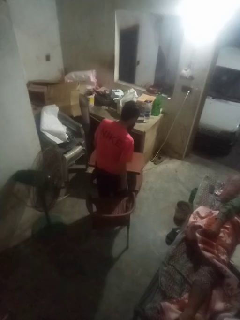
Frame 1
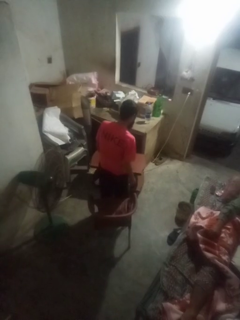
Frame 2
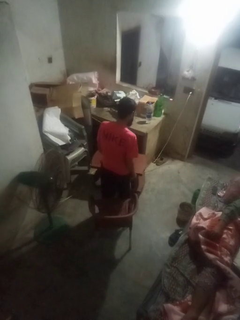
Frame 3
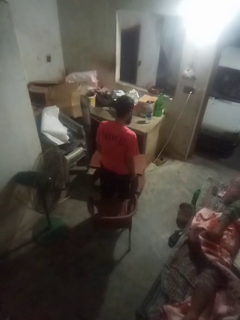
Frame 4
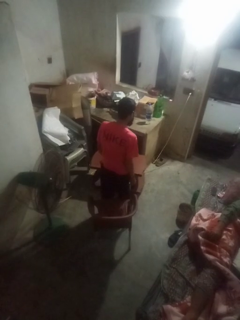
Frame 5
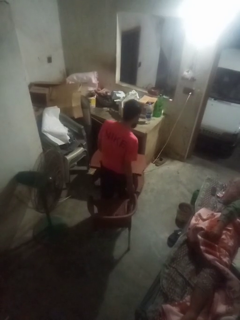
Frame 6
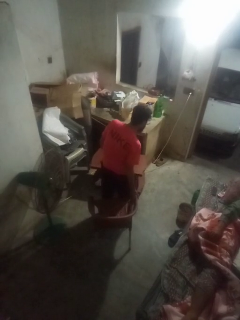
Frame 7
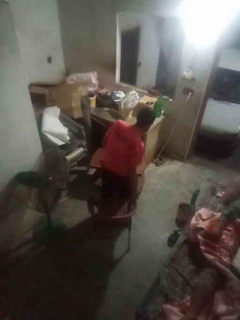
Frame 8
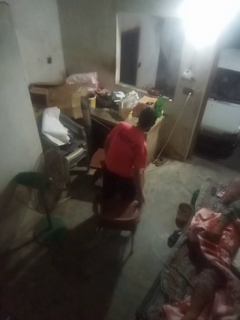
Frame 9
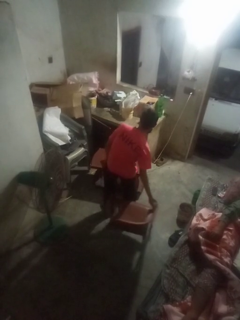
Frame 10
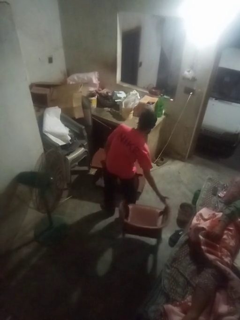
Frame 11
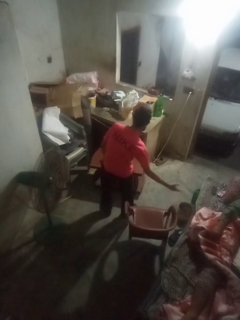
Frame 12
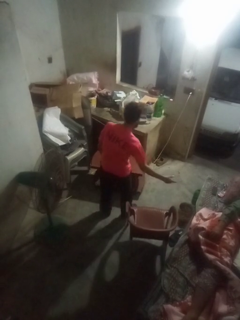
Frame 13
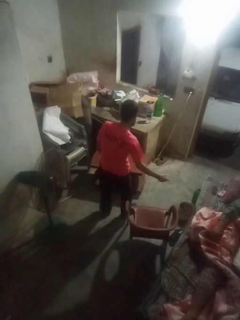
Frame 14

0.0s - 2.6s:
person pushes in chair

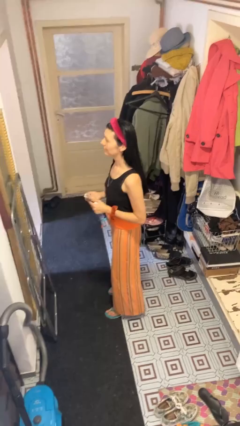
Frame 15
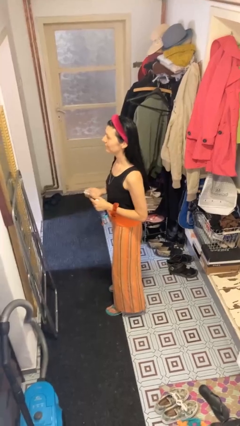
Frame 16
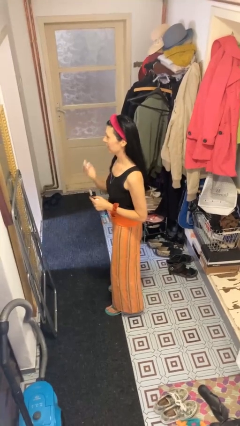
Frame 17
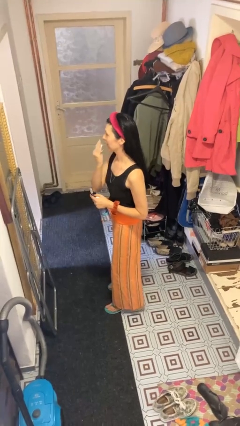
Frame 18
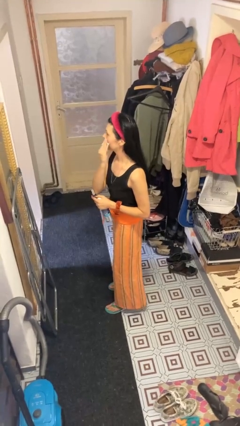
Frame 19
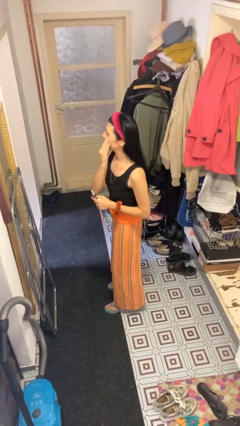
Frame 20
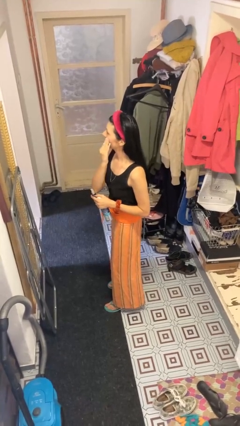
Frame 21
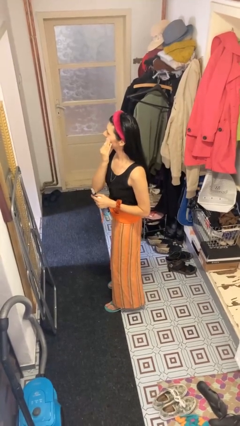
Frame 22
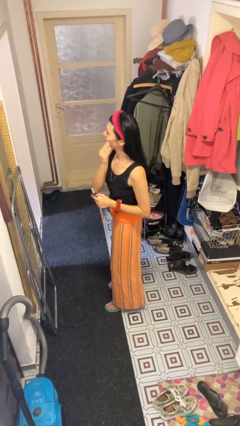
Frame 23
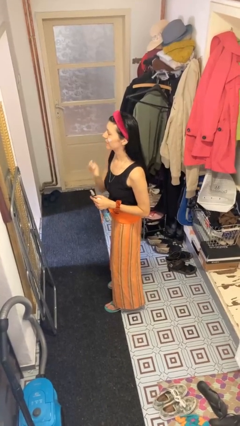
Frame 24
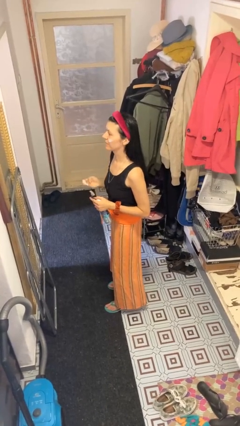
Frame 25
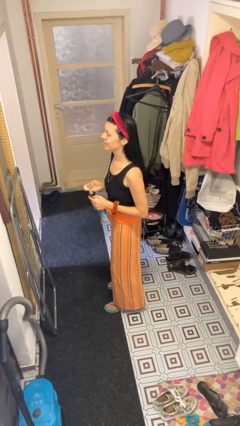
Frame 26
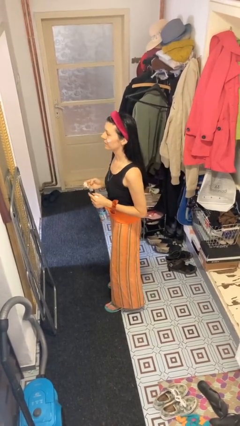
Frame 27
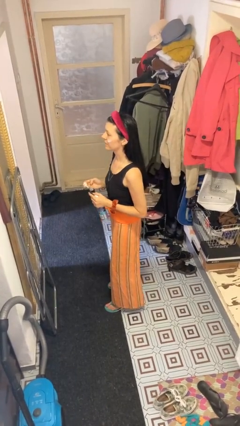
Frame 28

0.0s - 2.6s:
person applies shaving cream

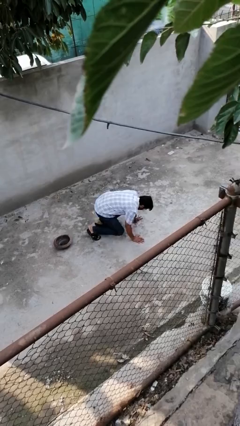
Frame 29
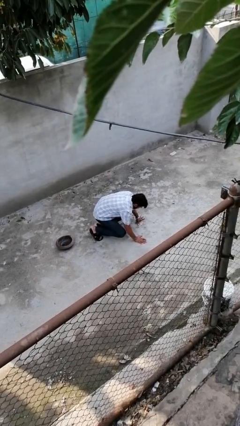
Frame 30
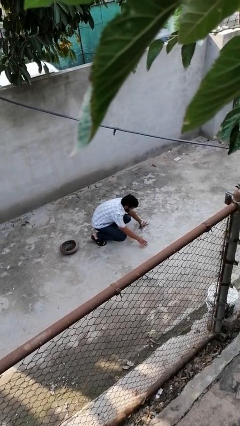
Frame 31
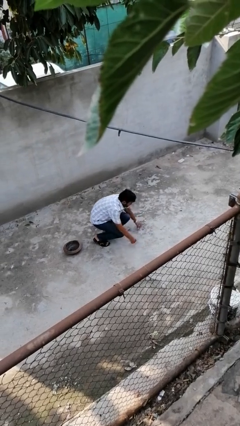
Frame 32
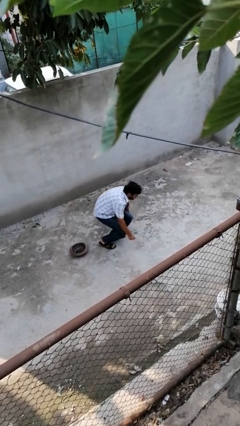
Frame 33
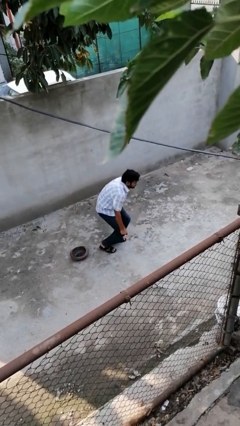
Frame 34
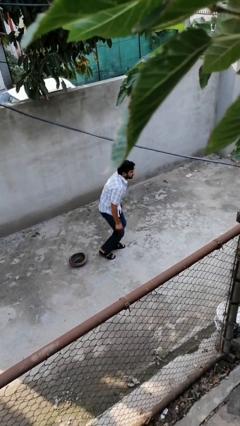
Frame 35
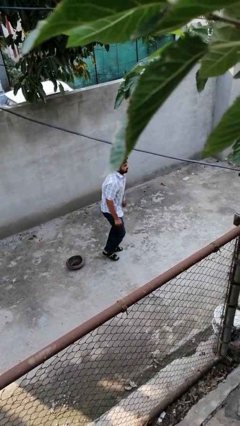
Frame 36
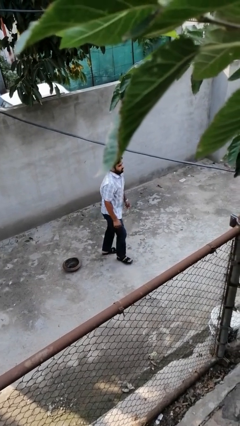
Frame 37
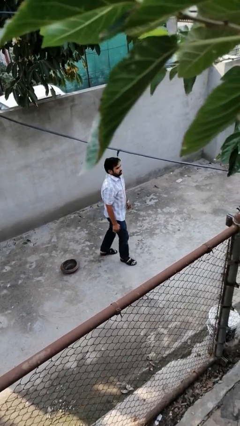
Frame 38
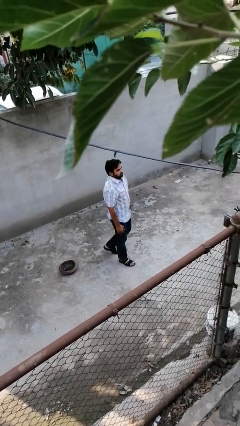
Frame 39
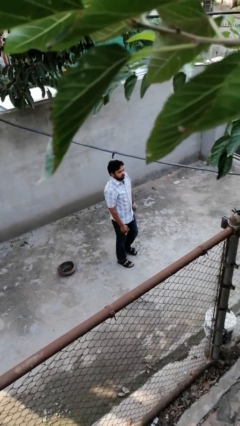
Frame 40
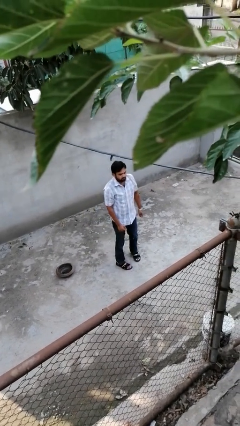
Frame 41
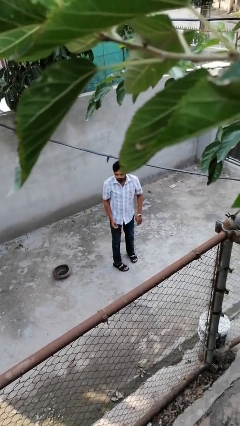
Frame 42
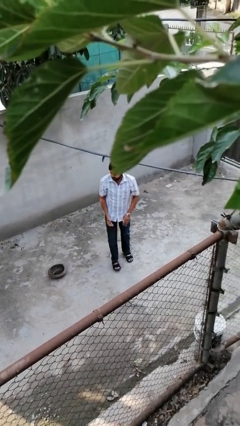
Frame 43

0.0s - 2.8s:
person stands up from floor

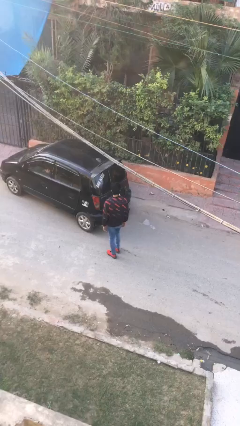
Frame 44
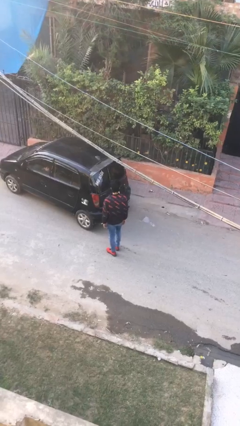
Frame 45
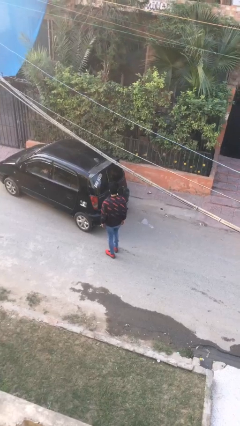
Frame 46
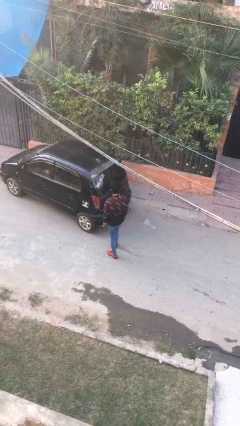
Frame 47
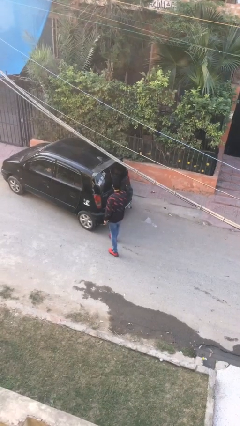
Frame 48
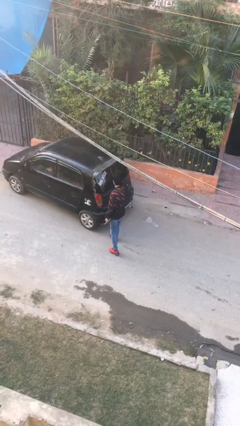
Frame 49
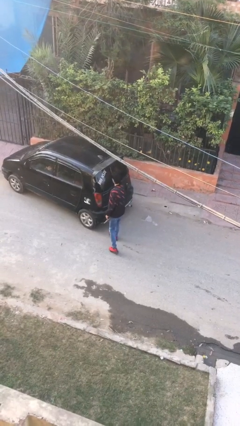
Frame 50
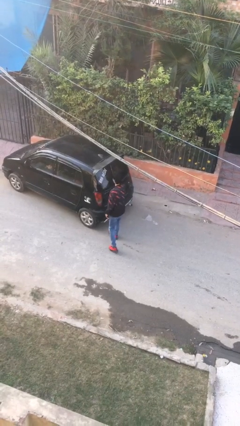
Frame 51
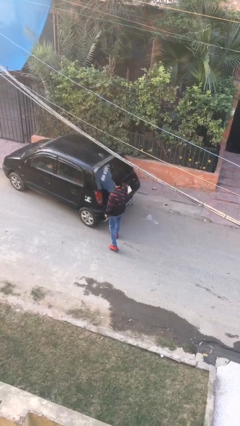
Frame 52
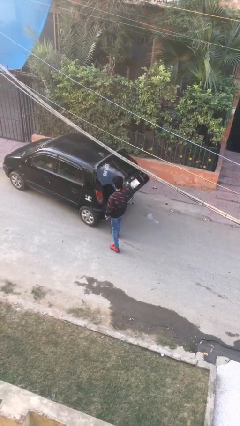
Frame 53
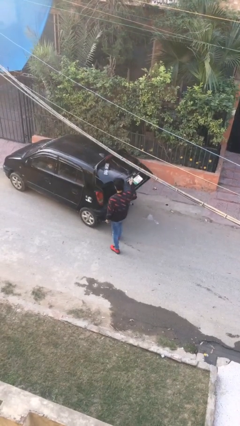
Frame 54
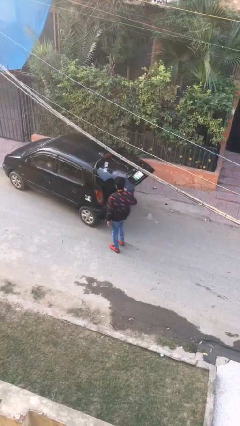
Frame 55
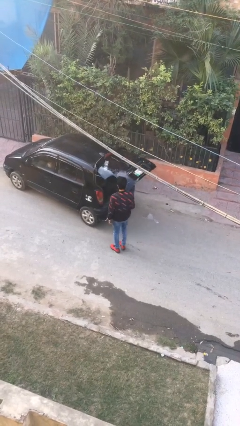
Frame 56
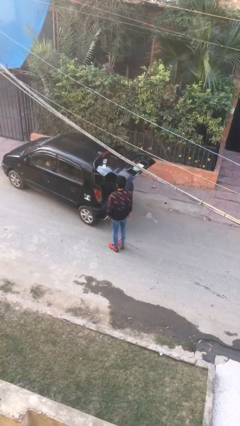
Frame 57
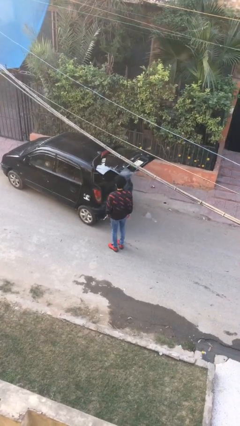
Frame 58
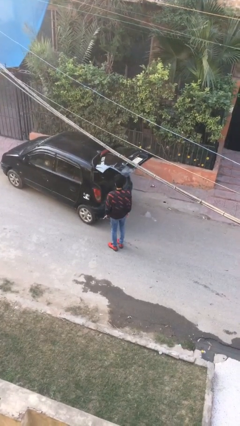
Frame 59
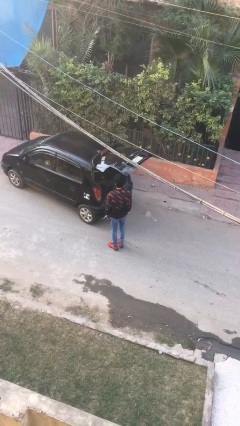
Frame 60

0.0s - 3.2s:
person opens car trunk

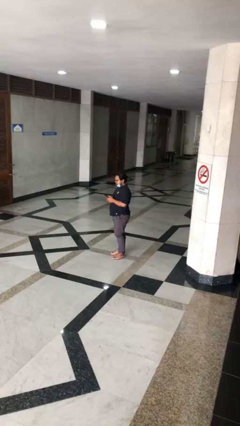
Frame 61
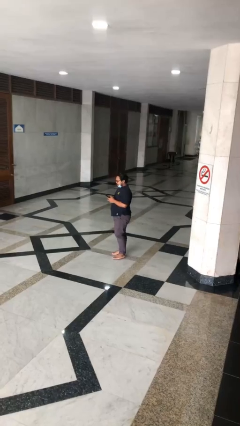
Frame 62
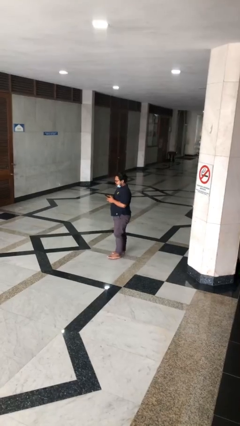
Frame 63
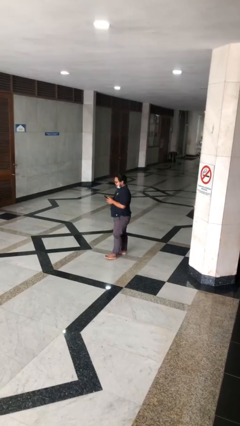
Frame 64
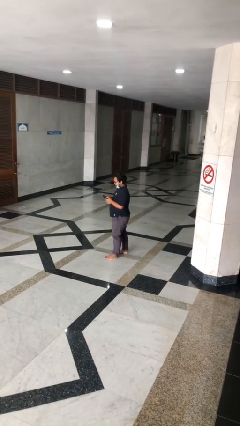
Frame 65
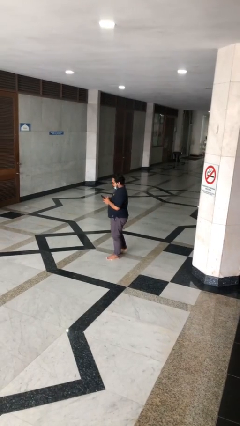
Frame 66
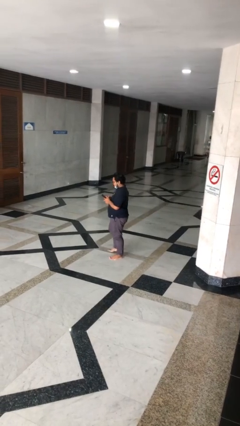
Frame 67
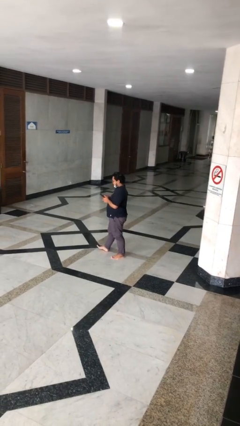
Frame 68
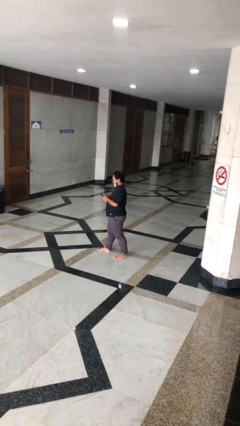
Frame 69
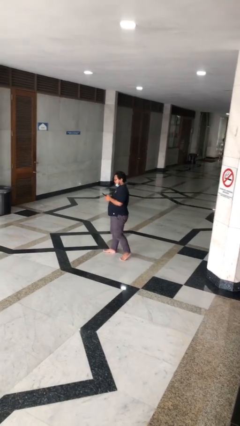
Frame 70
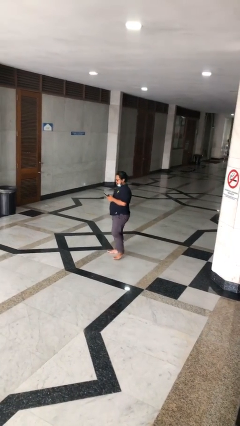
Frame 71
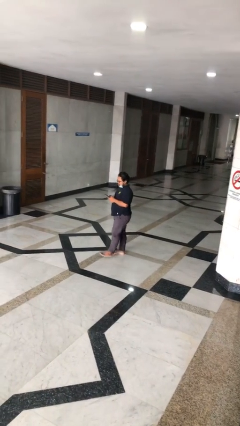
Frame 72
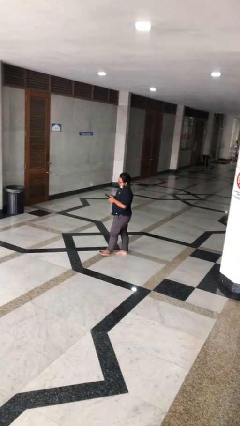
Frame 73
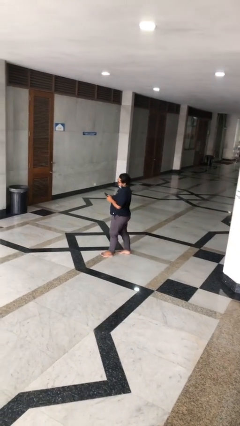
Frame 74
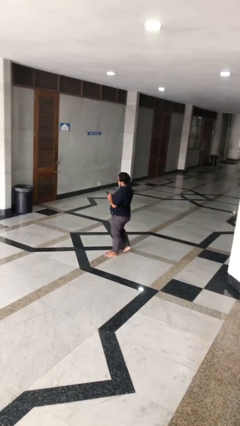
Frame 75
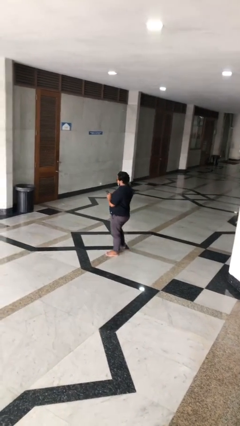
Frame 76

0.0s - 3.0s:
person texts on phone

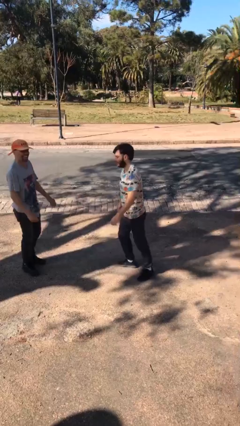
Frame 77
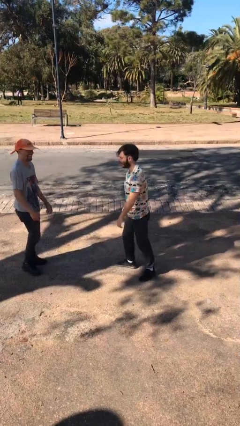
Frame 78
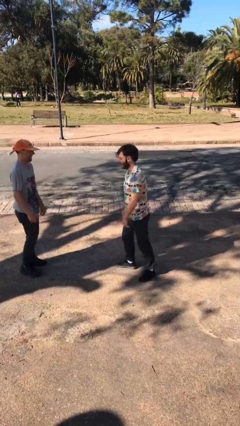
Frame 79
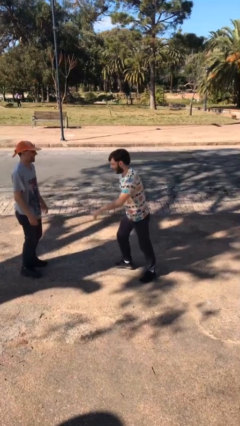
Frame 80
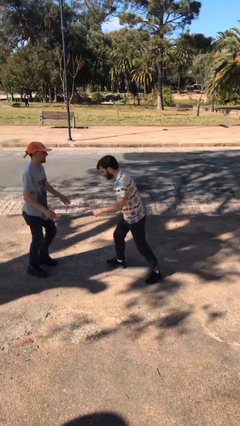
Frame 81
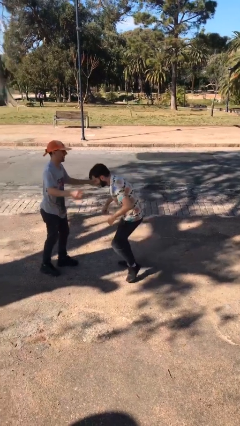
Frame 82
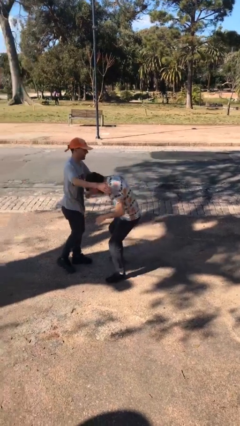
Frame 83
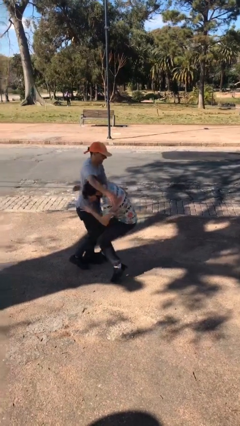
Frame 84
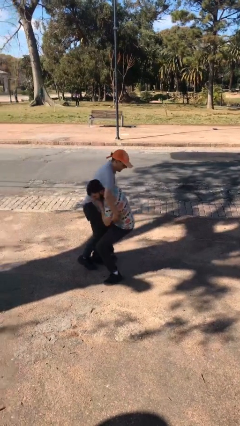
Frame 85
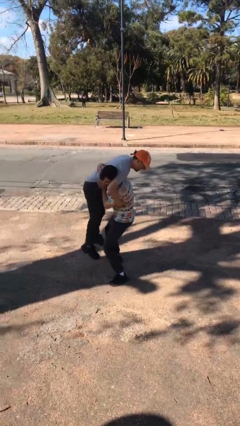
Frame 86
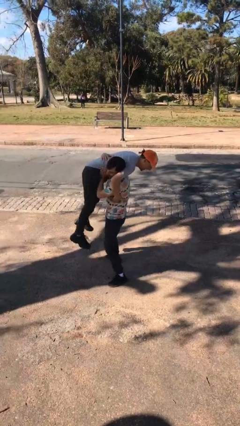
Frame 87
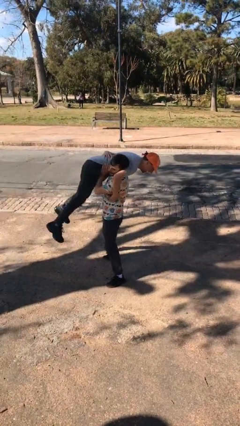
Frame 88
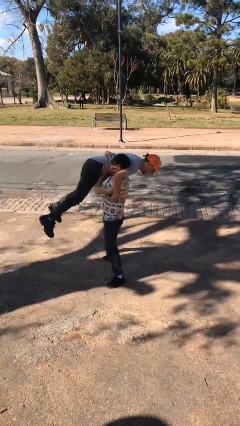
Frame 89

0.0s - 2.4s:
person carries person over shoulder

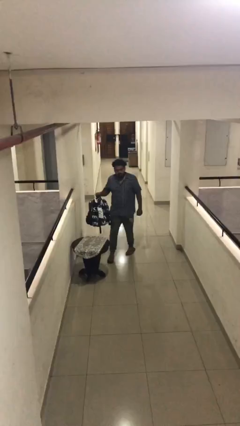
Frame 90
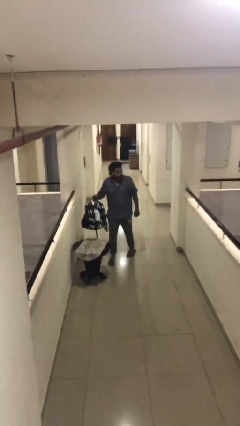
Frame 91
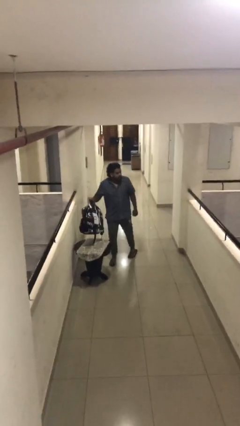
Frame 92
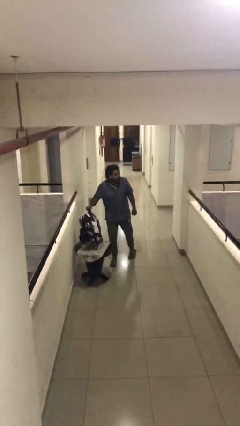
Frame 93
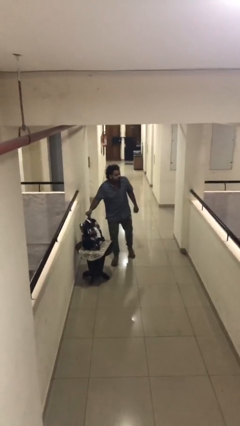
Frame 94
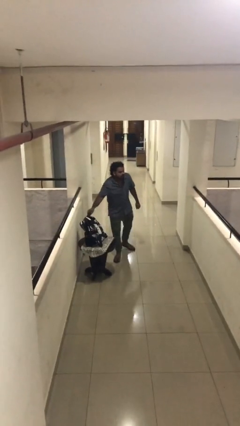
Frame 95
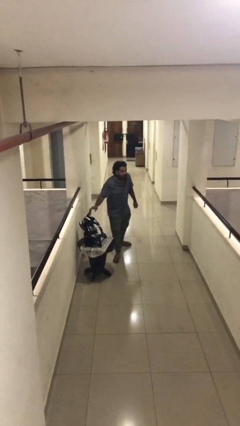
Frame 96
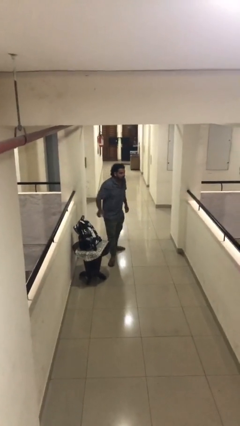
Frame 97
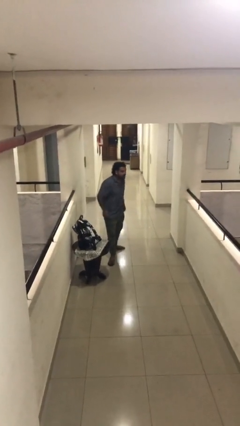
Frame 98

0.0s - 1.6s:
person puts down object on table
